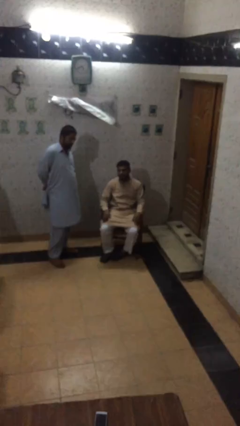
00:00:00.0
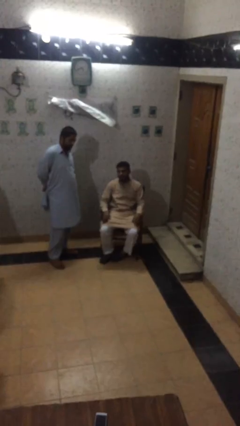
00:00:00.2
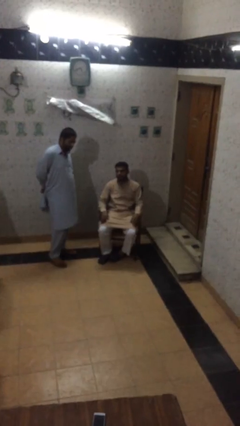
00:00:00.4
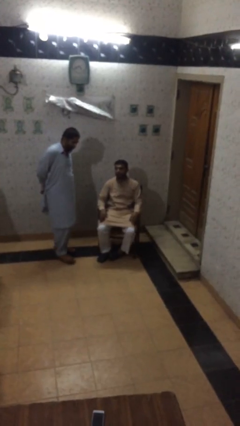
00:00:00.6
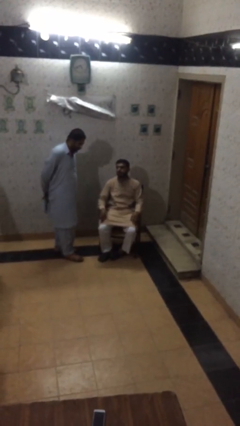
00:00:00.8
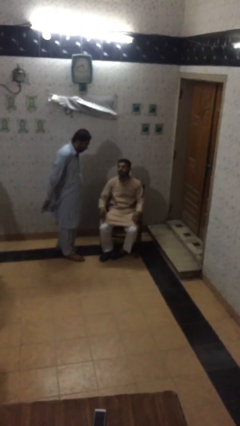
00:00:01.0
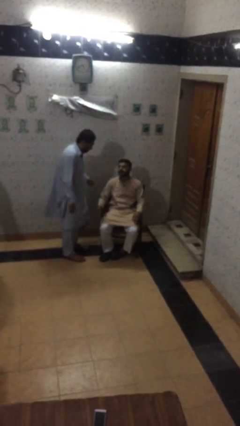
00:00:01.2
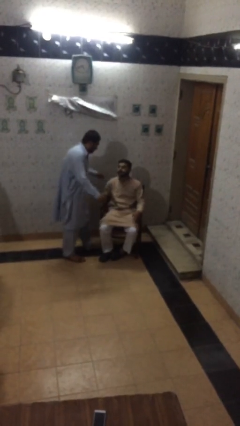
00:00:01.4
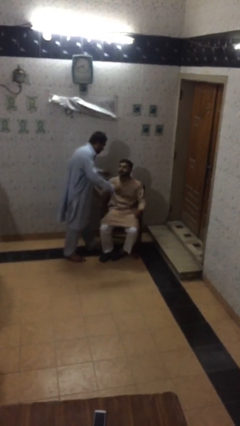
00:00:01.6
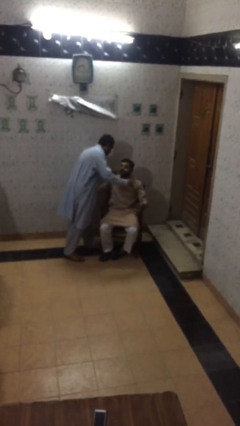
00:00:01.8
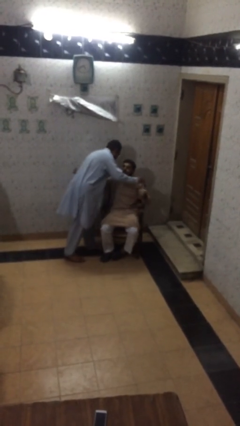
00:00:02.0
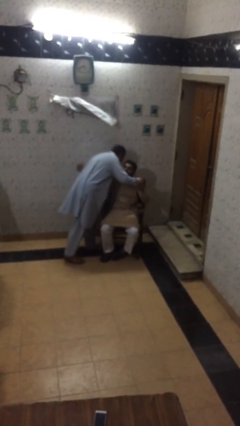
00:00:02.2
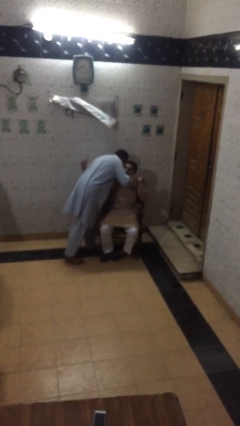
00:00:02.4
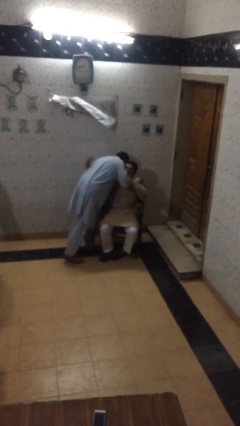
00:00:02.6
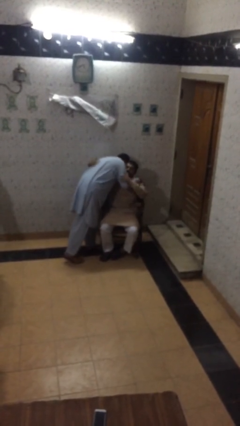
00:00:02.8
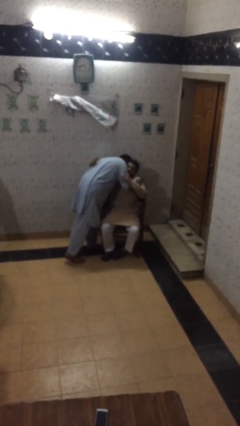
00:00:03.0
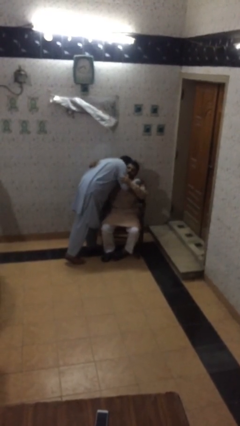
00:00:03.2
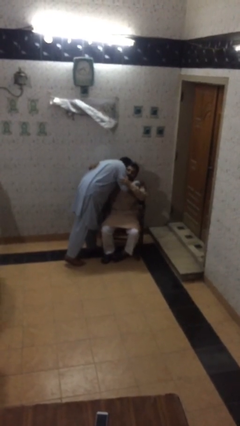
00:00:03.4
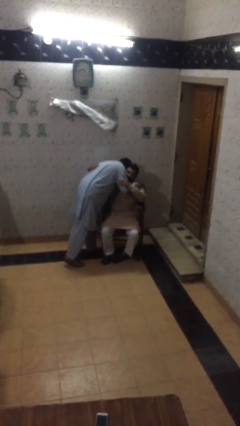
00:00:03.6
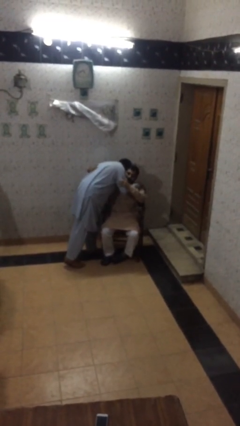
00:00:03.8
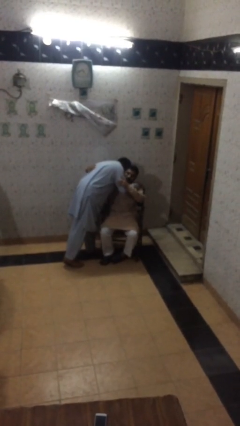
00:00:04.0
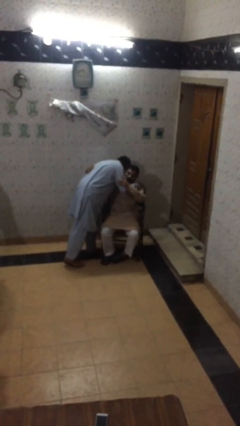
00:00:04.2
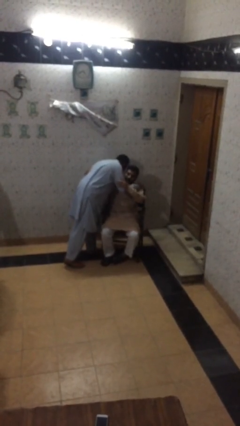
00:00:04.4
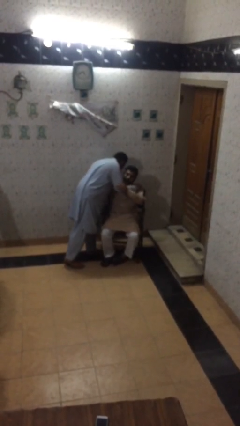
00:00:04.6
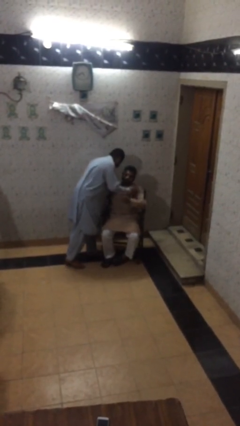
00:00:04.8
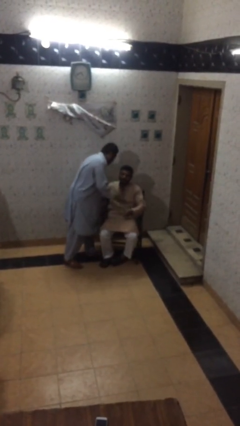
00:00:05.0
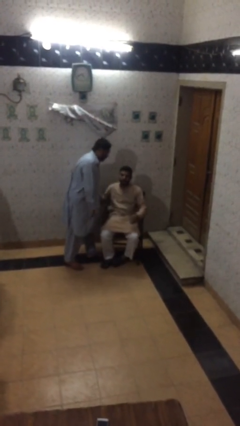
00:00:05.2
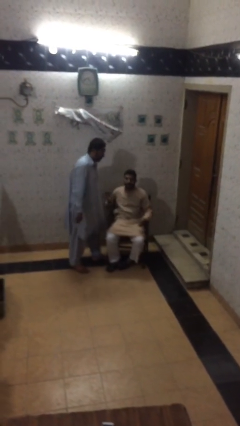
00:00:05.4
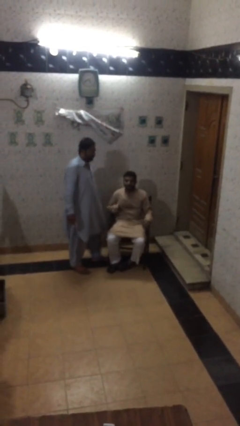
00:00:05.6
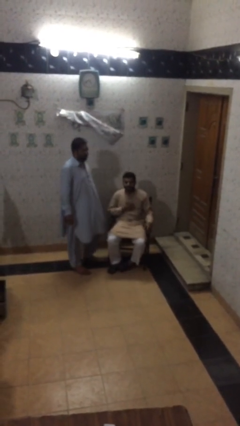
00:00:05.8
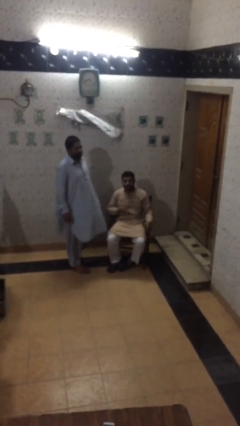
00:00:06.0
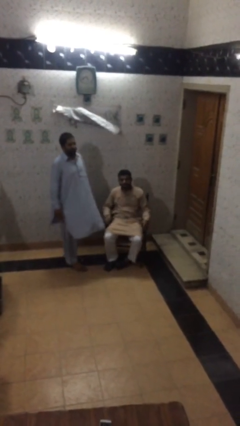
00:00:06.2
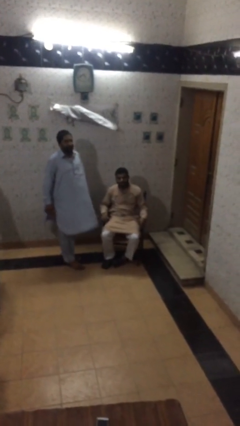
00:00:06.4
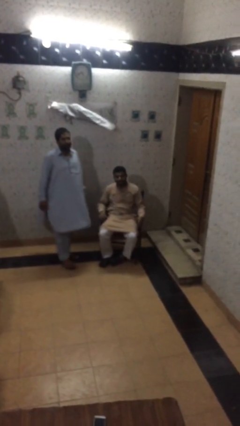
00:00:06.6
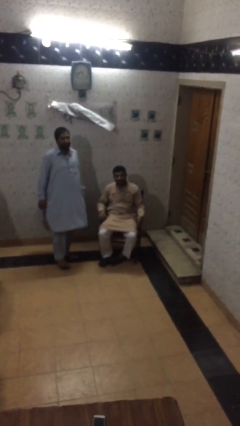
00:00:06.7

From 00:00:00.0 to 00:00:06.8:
person embraces person

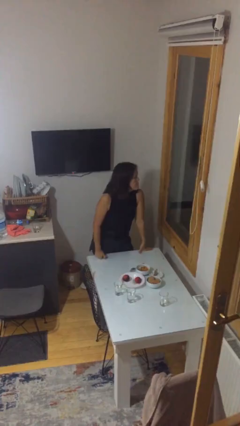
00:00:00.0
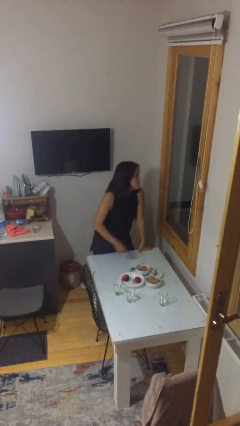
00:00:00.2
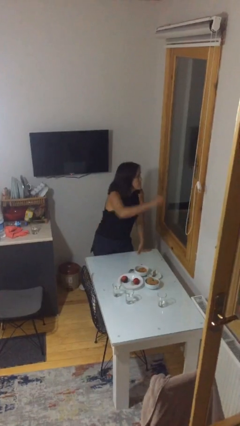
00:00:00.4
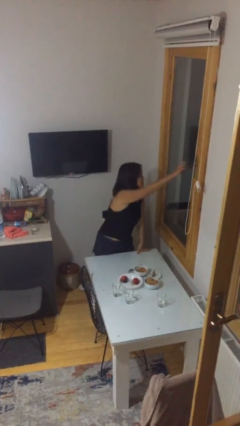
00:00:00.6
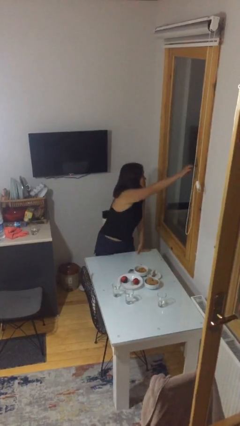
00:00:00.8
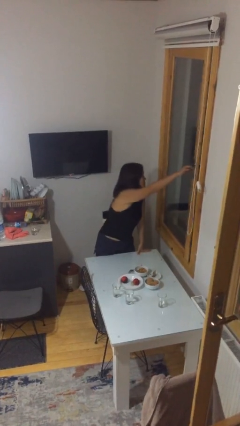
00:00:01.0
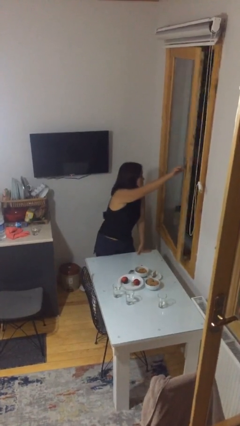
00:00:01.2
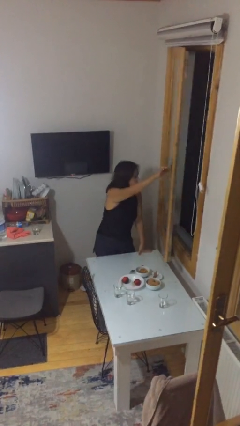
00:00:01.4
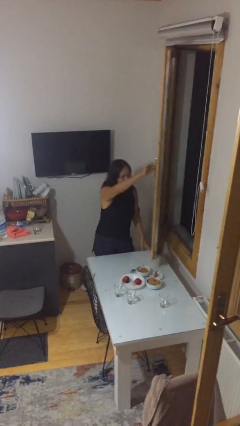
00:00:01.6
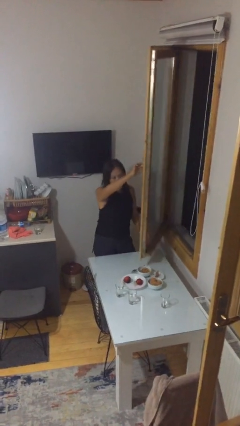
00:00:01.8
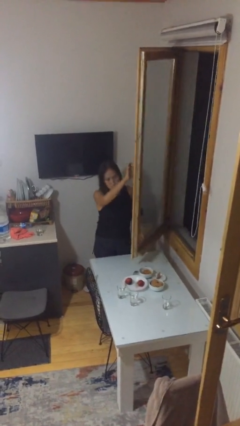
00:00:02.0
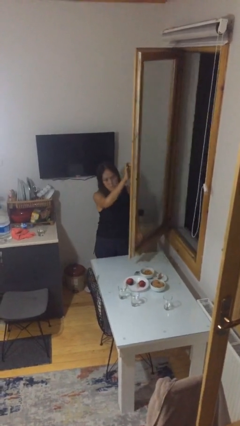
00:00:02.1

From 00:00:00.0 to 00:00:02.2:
person opens home window

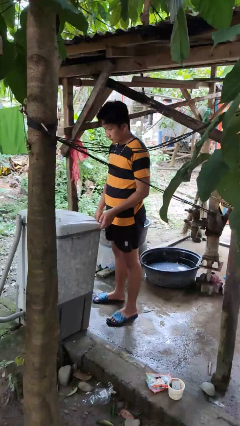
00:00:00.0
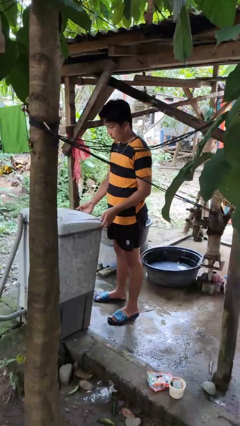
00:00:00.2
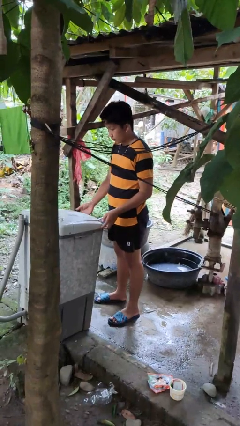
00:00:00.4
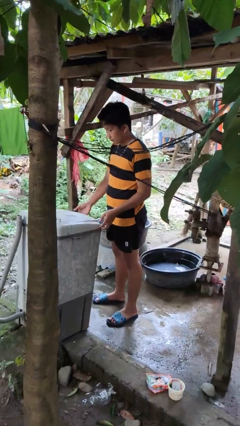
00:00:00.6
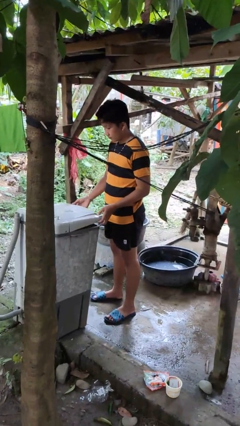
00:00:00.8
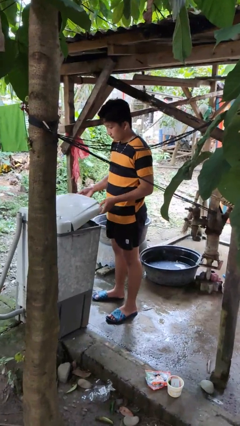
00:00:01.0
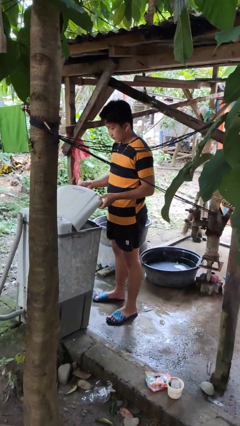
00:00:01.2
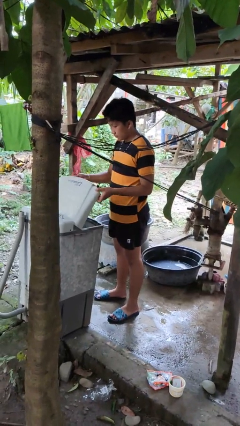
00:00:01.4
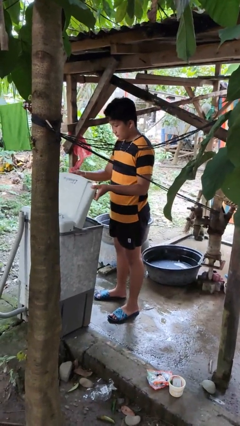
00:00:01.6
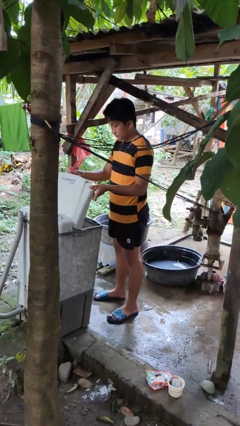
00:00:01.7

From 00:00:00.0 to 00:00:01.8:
person opens clothes washer

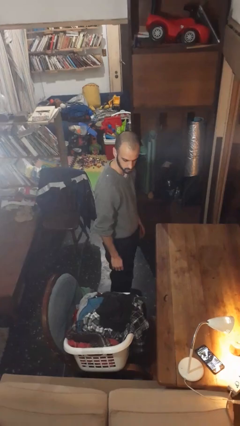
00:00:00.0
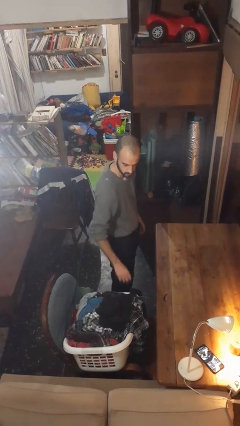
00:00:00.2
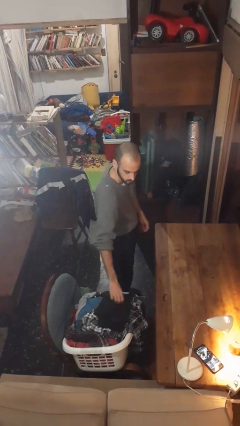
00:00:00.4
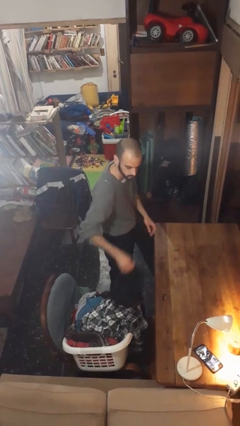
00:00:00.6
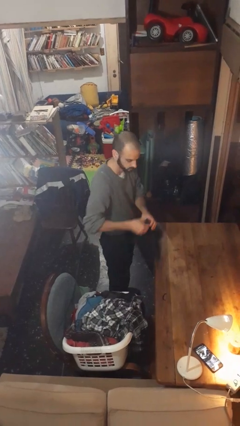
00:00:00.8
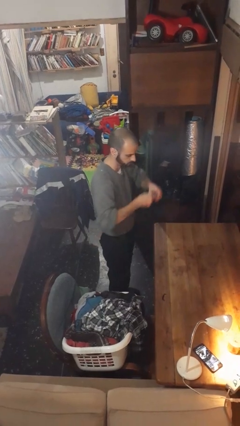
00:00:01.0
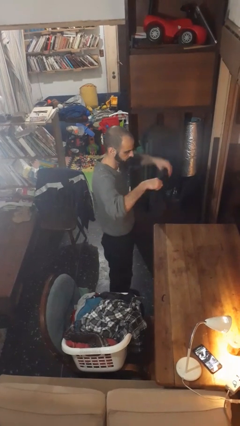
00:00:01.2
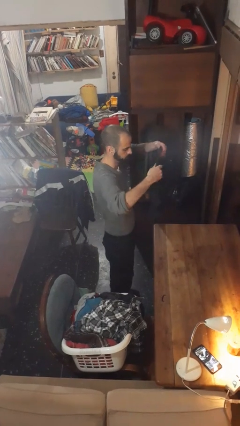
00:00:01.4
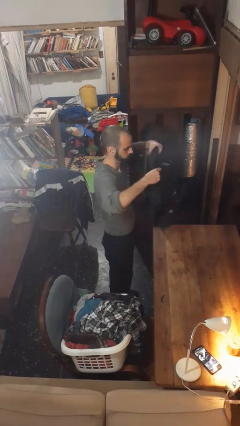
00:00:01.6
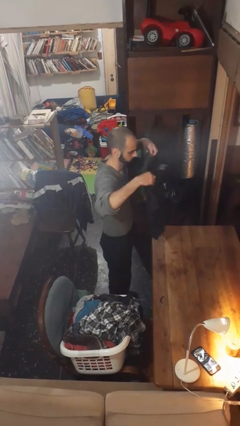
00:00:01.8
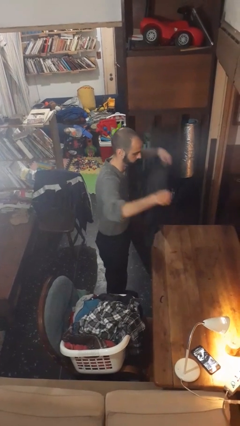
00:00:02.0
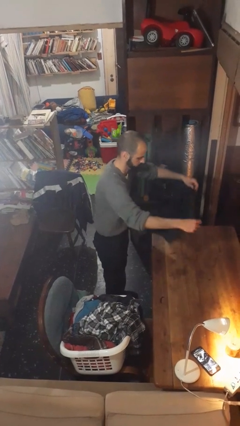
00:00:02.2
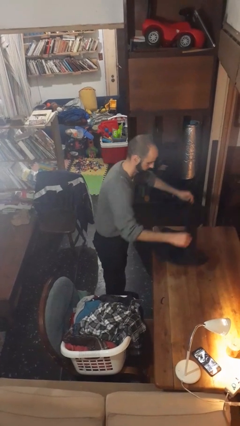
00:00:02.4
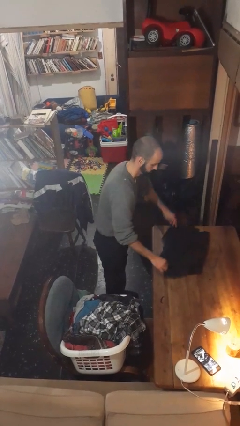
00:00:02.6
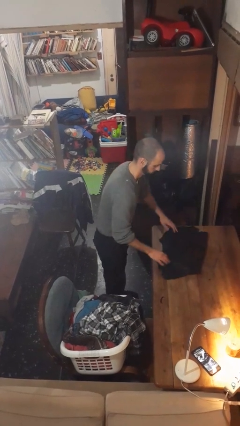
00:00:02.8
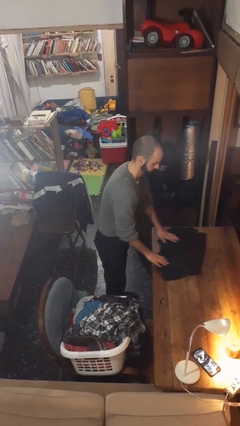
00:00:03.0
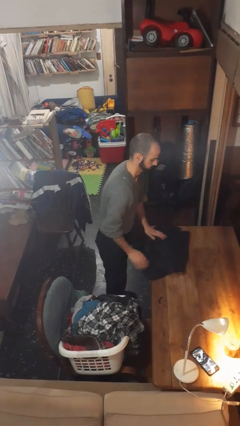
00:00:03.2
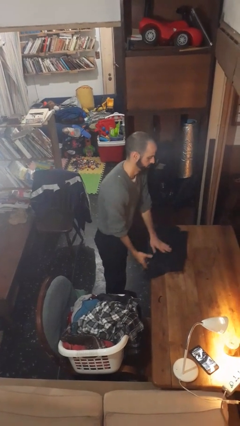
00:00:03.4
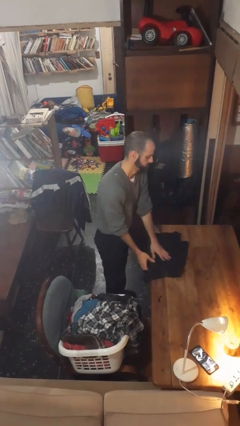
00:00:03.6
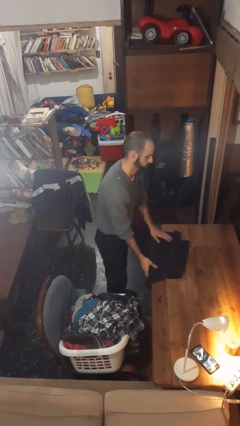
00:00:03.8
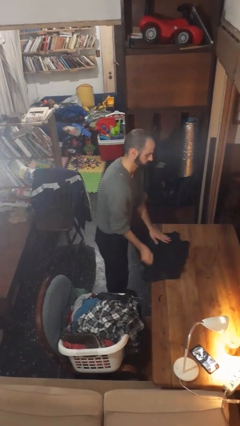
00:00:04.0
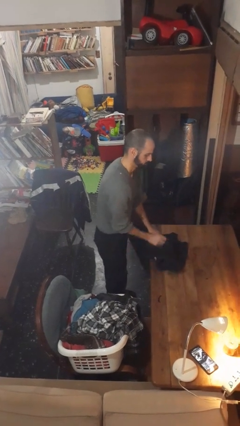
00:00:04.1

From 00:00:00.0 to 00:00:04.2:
person folds shirt

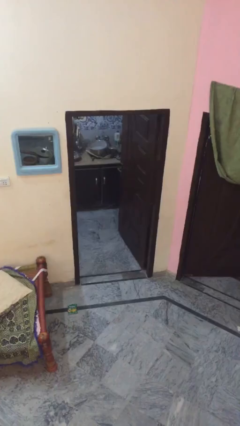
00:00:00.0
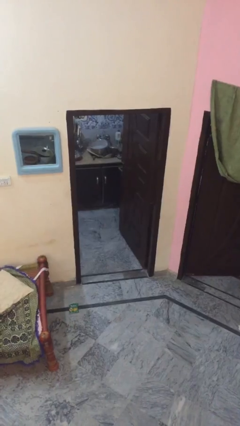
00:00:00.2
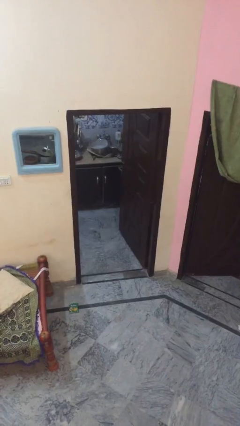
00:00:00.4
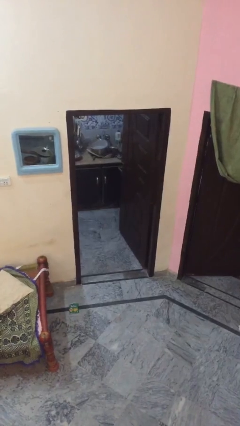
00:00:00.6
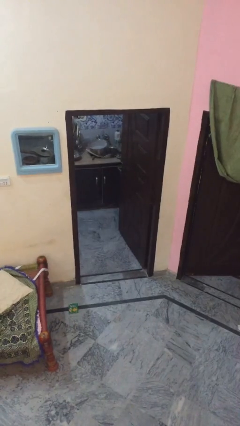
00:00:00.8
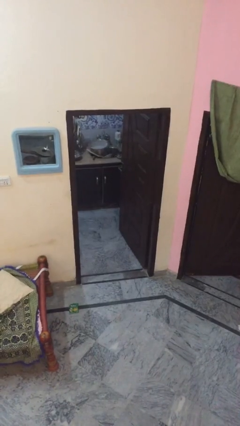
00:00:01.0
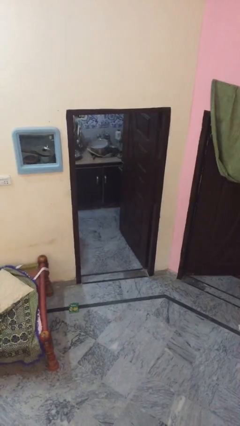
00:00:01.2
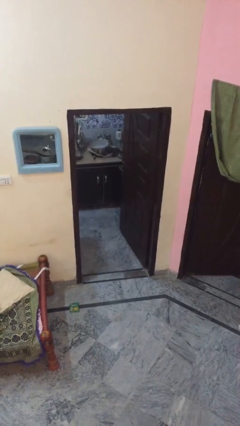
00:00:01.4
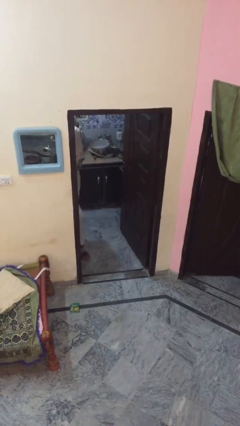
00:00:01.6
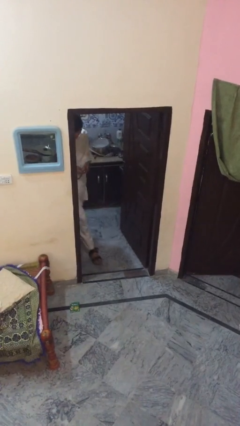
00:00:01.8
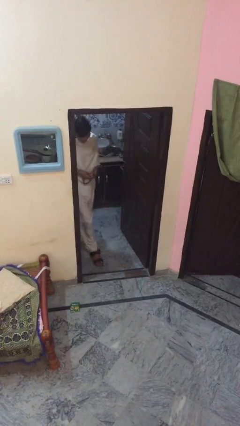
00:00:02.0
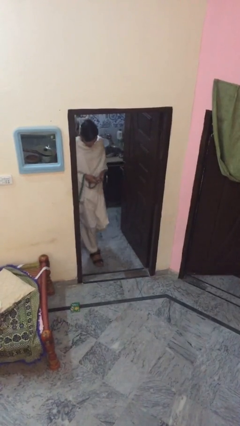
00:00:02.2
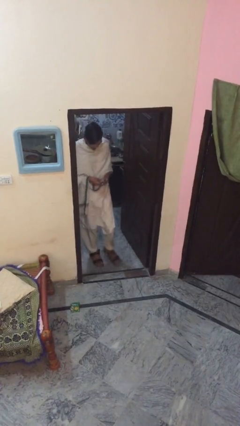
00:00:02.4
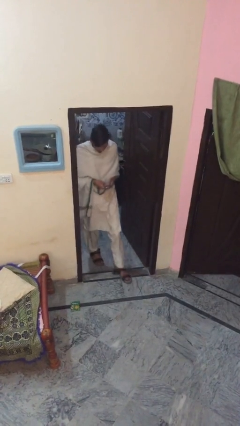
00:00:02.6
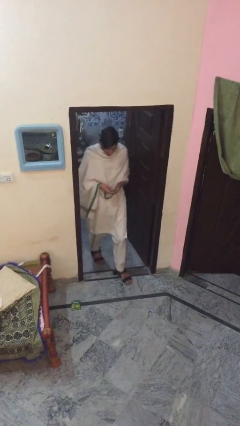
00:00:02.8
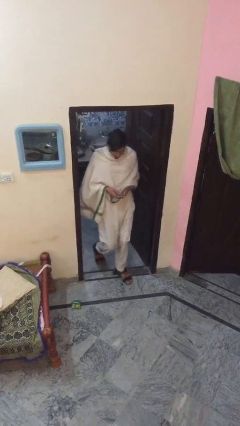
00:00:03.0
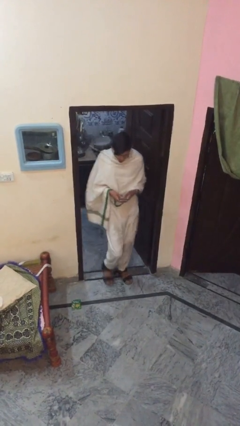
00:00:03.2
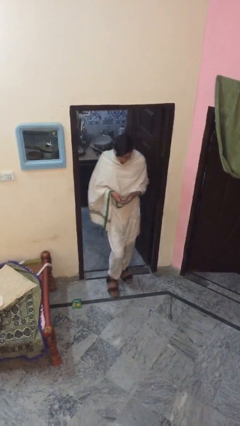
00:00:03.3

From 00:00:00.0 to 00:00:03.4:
person enters scene through structure
